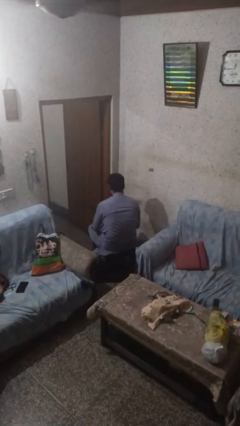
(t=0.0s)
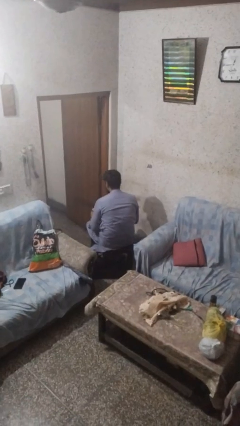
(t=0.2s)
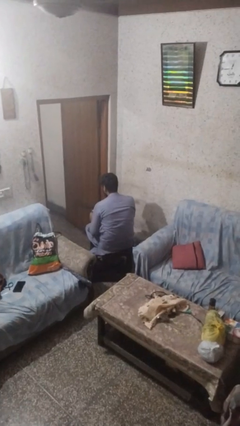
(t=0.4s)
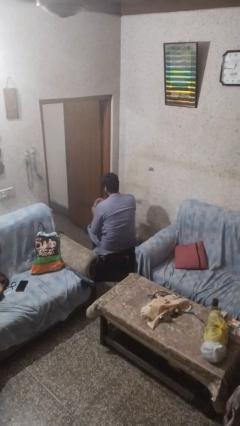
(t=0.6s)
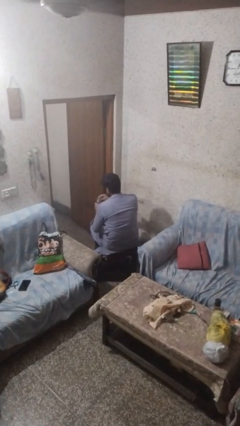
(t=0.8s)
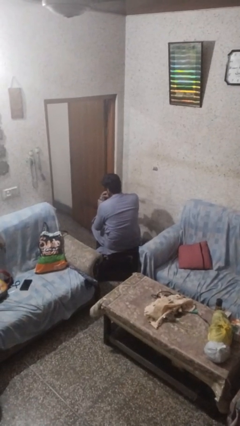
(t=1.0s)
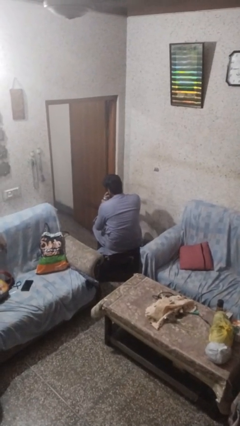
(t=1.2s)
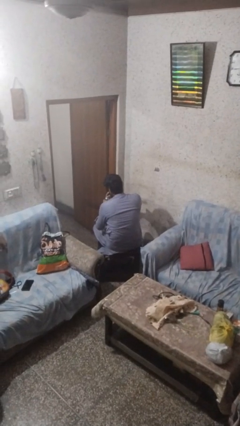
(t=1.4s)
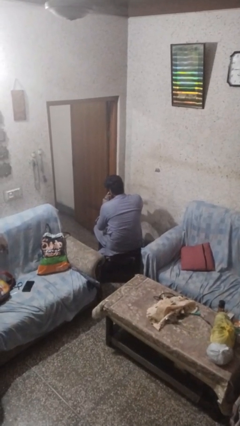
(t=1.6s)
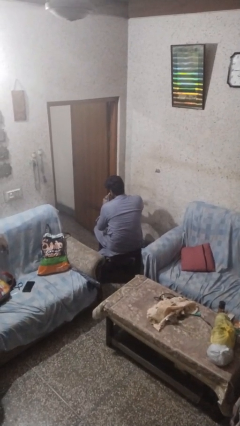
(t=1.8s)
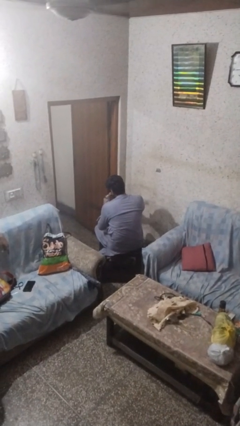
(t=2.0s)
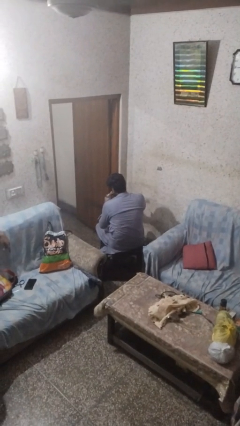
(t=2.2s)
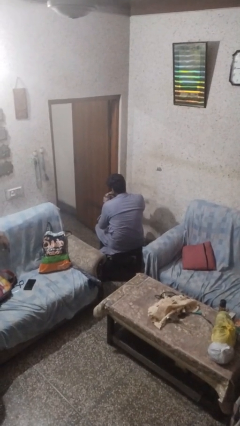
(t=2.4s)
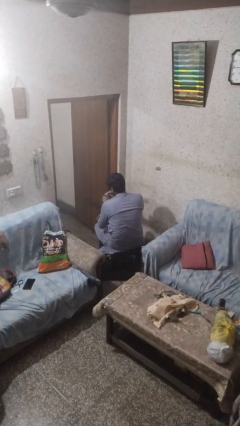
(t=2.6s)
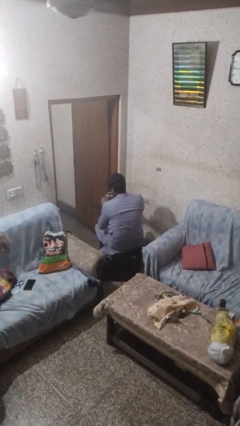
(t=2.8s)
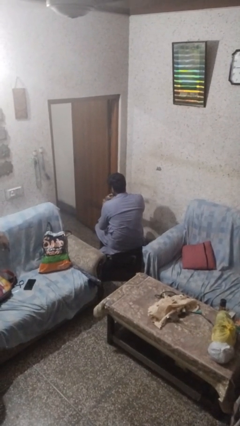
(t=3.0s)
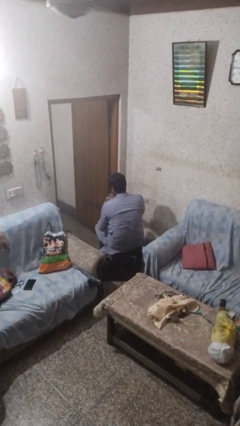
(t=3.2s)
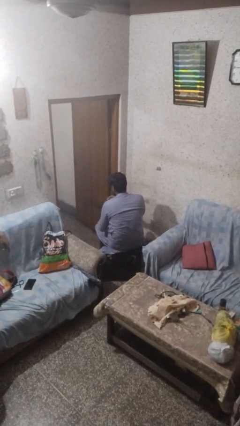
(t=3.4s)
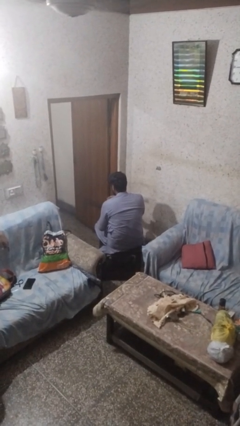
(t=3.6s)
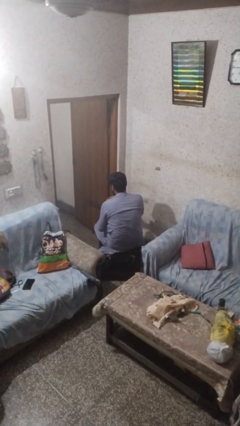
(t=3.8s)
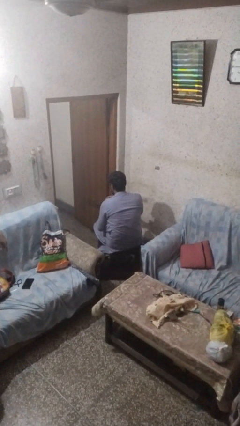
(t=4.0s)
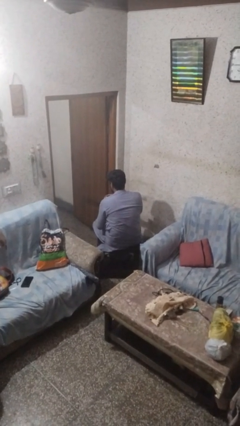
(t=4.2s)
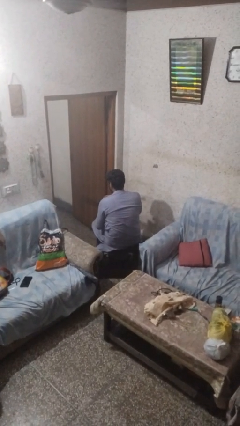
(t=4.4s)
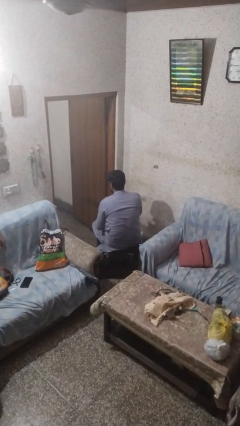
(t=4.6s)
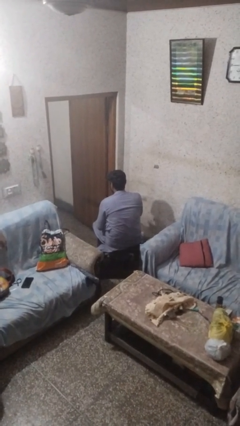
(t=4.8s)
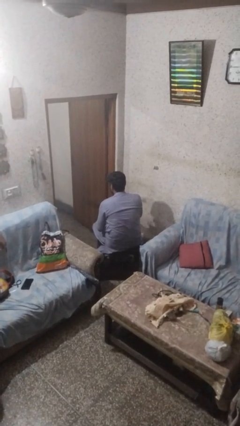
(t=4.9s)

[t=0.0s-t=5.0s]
person opens beverage can

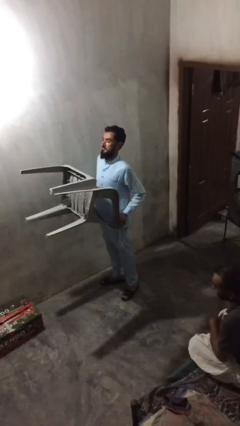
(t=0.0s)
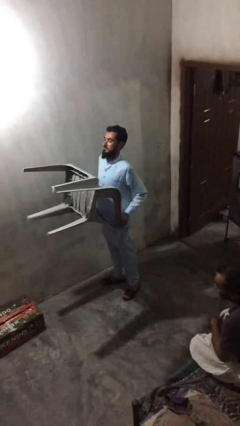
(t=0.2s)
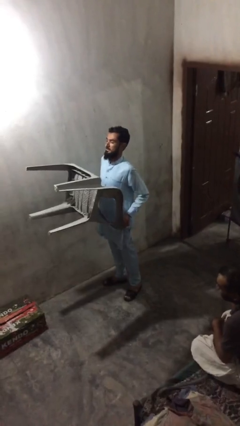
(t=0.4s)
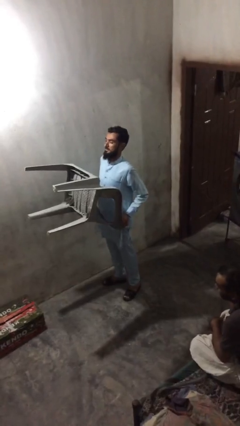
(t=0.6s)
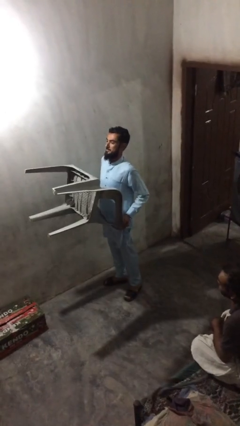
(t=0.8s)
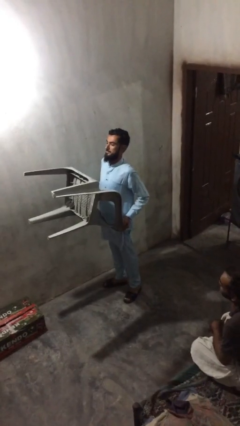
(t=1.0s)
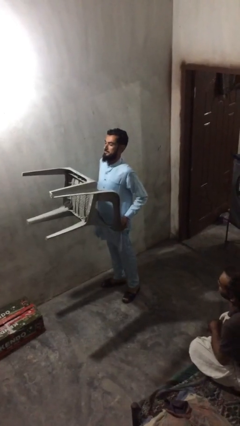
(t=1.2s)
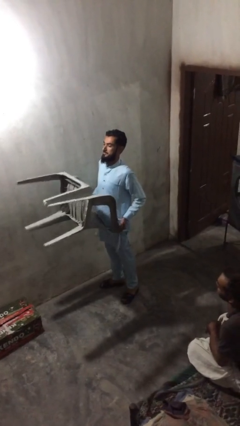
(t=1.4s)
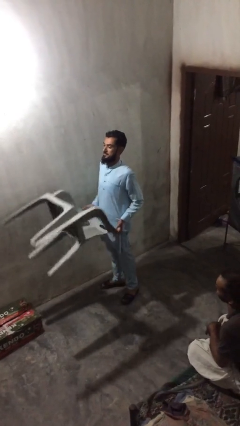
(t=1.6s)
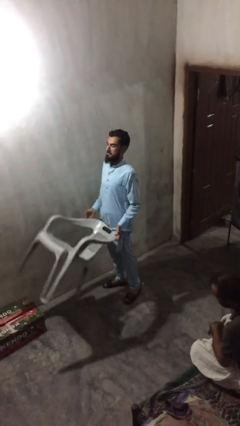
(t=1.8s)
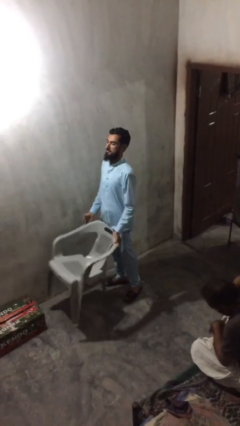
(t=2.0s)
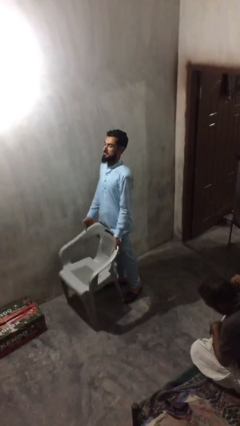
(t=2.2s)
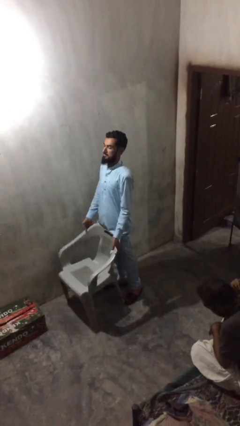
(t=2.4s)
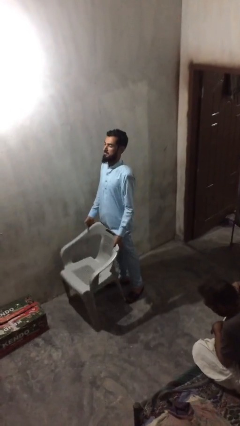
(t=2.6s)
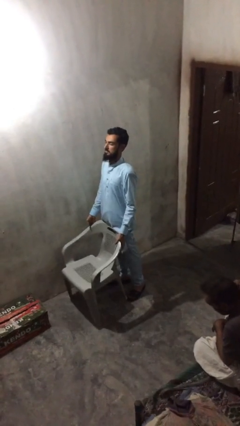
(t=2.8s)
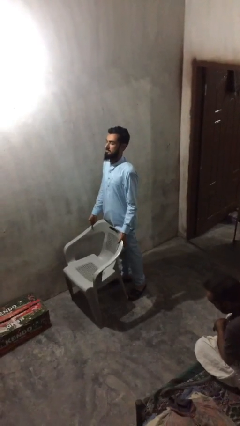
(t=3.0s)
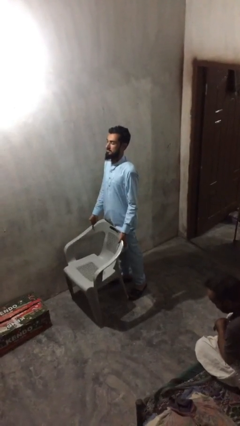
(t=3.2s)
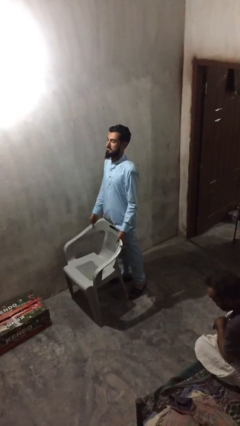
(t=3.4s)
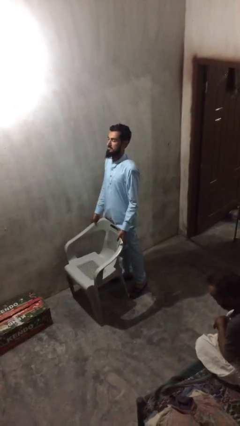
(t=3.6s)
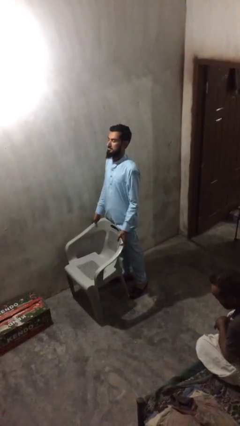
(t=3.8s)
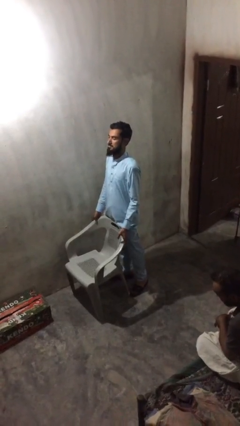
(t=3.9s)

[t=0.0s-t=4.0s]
person puts down object on floor

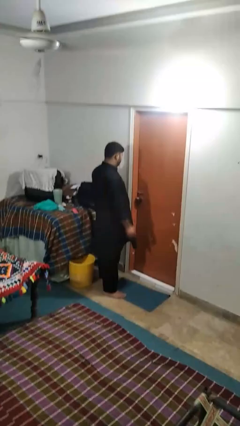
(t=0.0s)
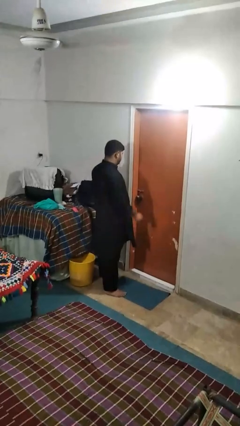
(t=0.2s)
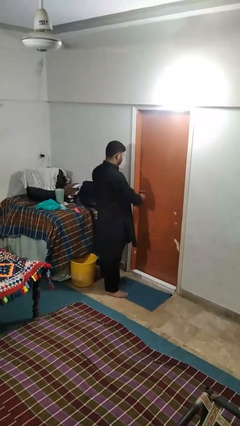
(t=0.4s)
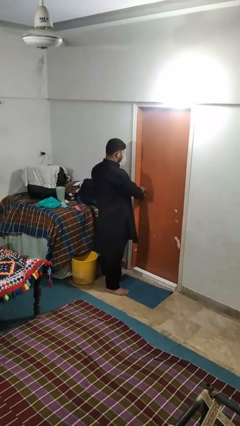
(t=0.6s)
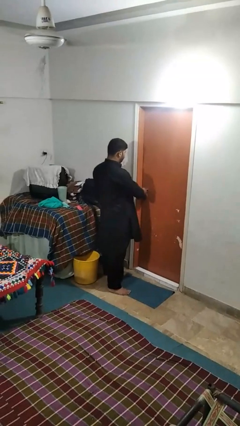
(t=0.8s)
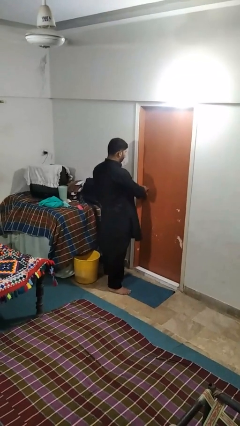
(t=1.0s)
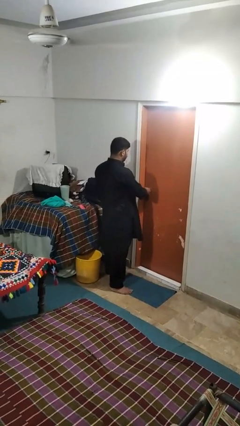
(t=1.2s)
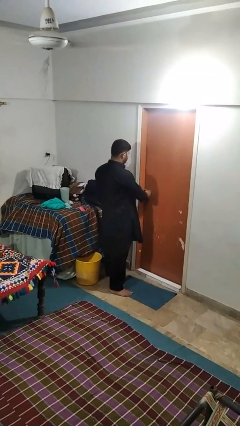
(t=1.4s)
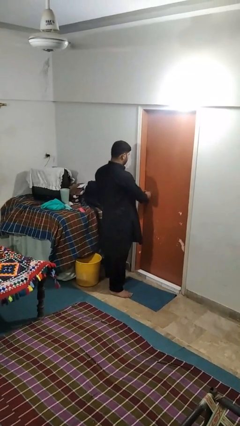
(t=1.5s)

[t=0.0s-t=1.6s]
person unlocks door with keys

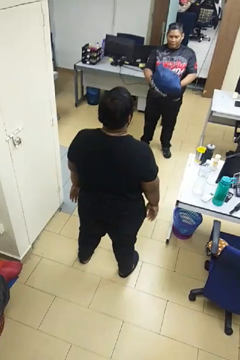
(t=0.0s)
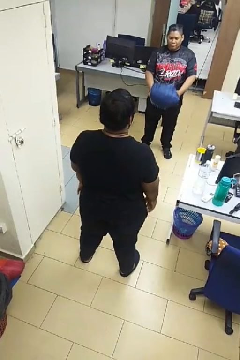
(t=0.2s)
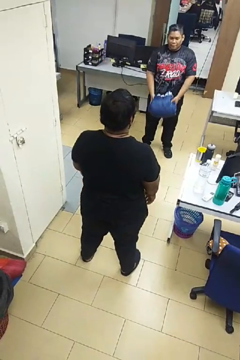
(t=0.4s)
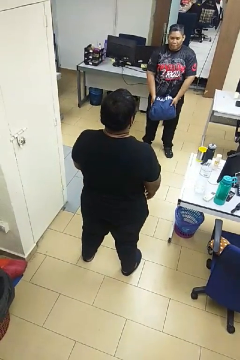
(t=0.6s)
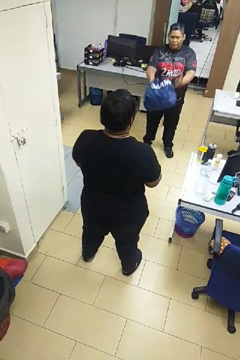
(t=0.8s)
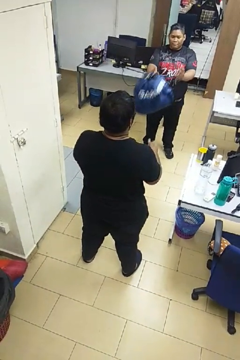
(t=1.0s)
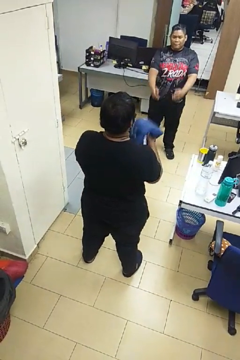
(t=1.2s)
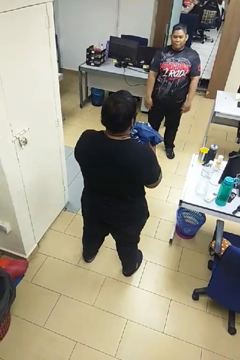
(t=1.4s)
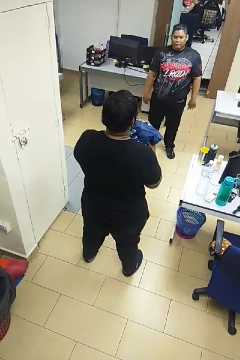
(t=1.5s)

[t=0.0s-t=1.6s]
person catches object from person

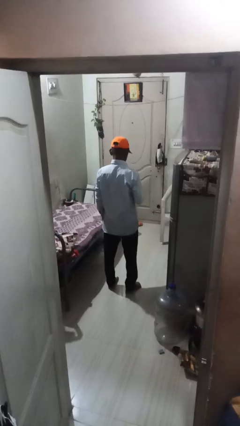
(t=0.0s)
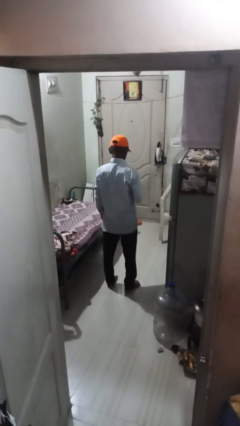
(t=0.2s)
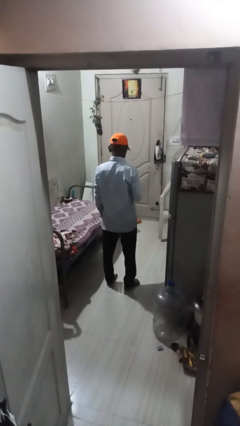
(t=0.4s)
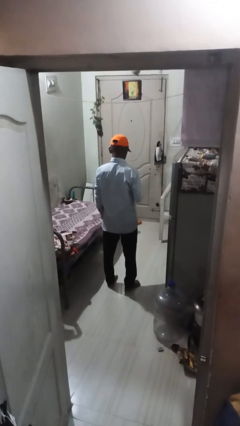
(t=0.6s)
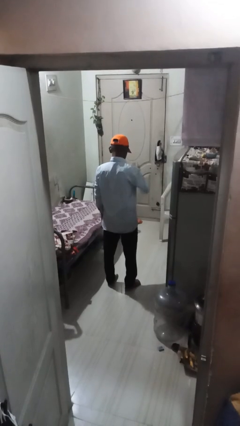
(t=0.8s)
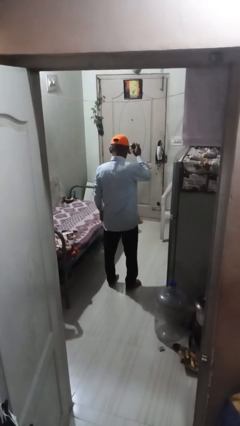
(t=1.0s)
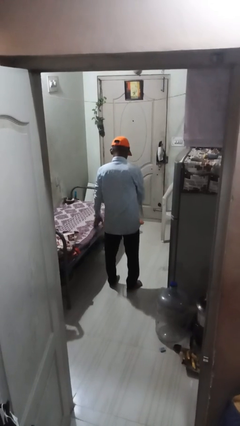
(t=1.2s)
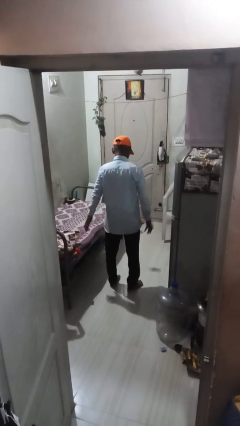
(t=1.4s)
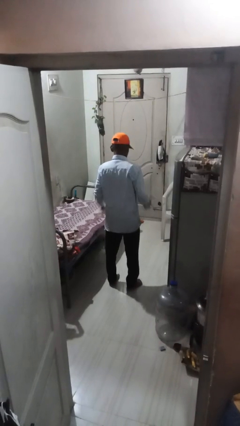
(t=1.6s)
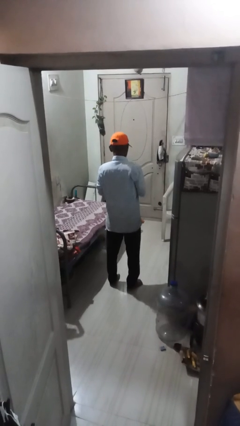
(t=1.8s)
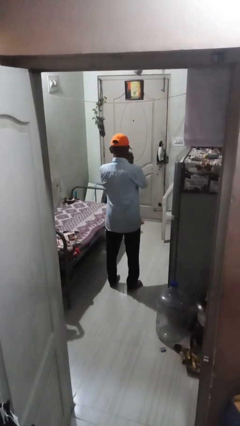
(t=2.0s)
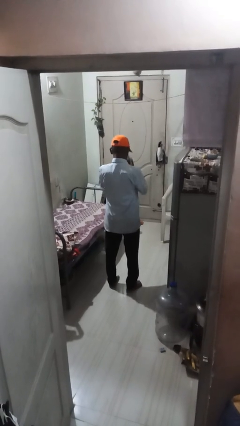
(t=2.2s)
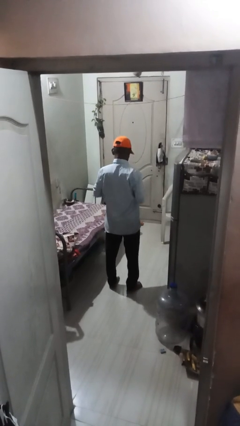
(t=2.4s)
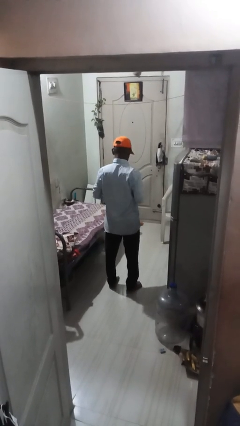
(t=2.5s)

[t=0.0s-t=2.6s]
person bounces ball on floor

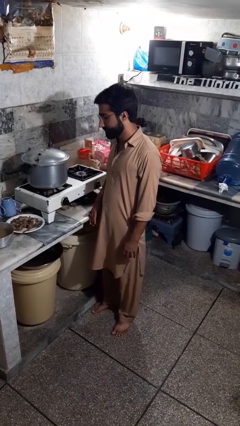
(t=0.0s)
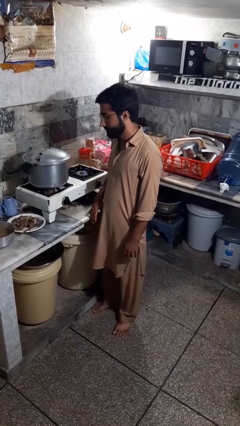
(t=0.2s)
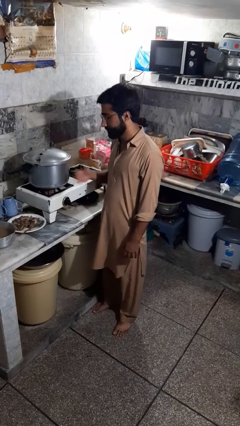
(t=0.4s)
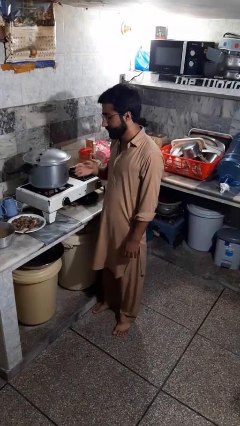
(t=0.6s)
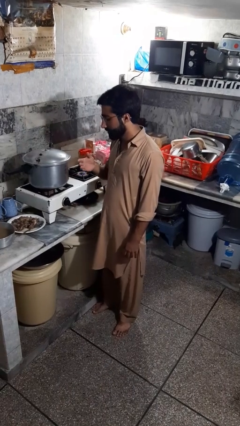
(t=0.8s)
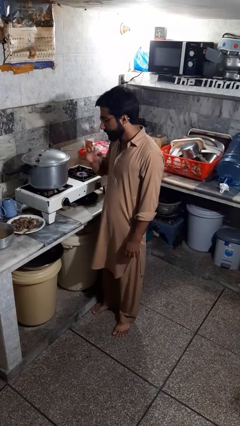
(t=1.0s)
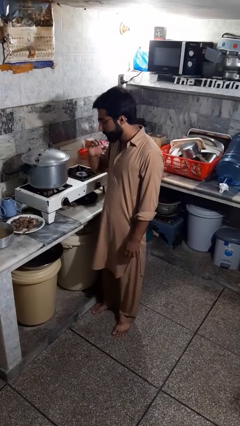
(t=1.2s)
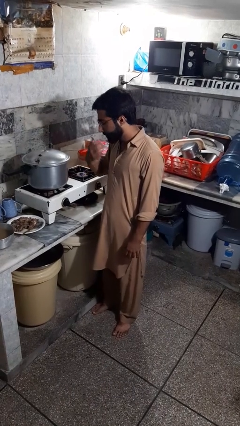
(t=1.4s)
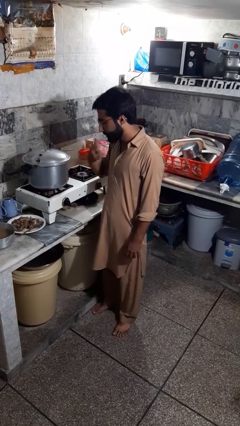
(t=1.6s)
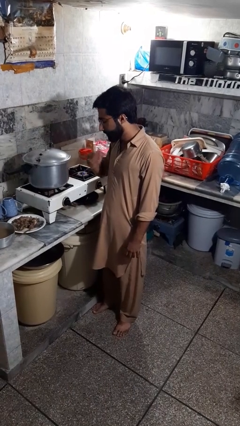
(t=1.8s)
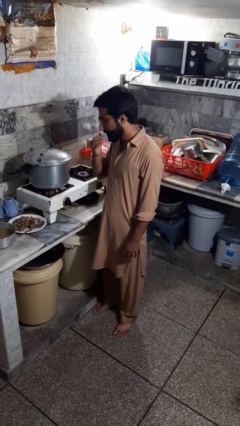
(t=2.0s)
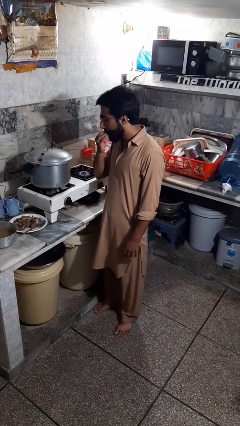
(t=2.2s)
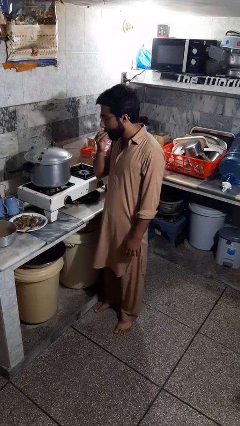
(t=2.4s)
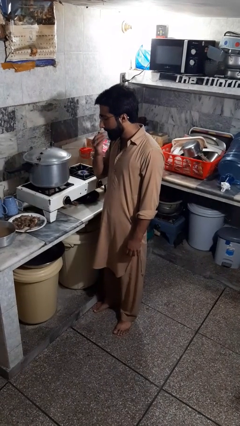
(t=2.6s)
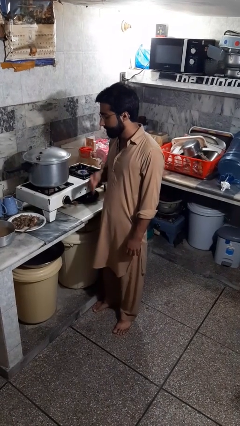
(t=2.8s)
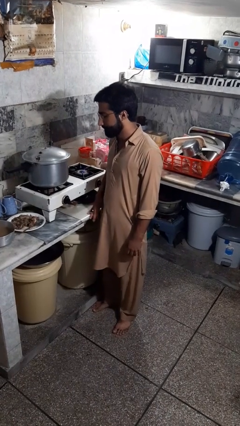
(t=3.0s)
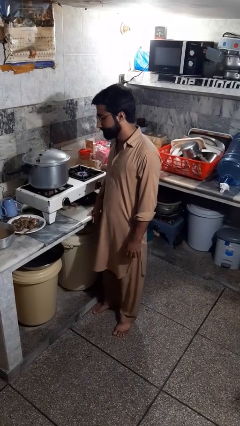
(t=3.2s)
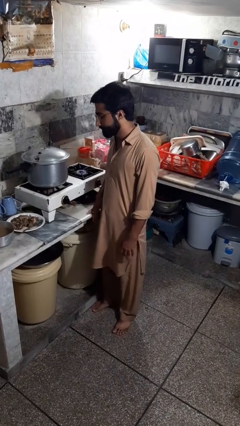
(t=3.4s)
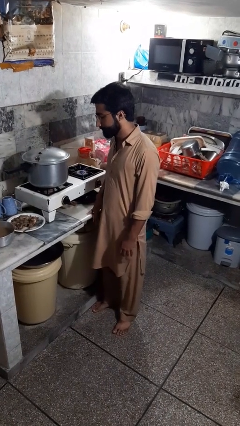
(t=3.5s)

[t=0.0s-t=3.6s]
person burns hand
